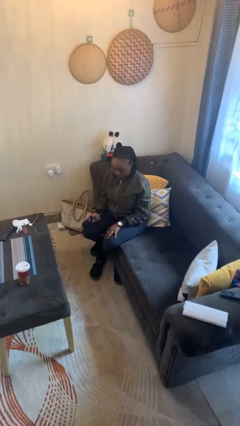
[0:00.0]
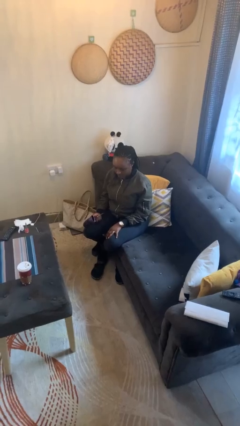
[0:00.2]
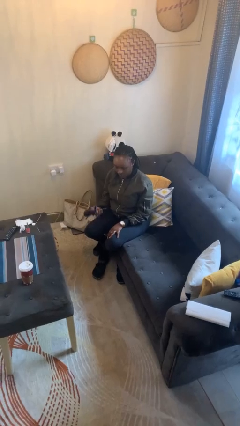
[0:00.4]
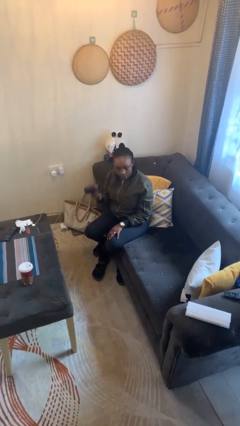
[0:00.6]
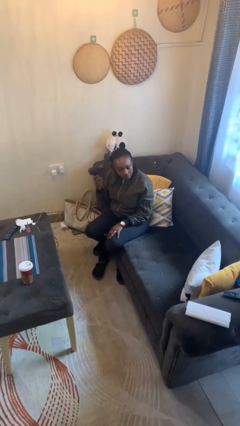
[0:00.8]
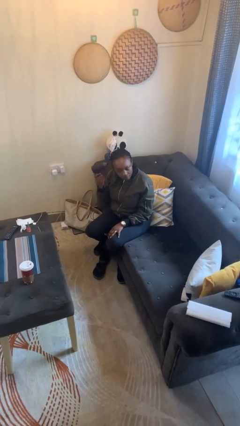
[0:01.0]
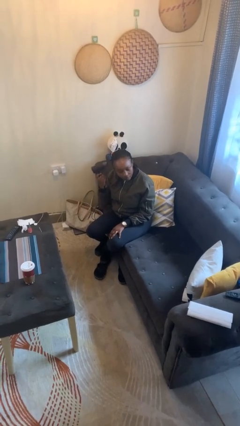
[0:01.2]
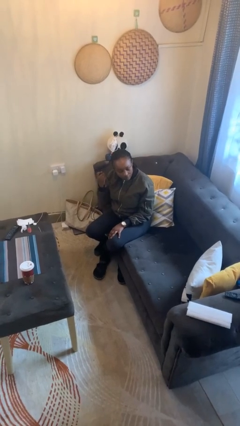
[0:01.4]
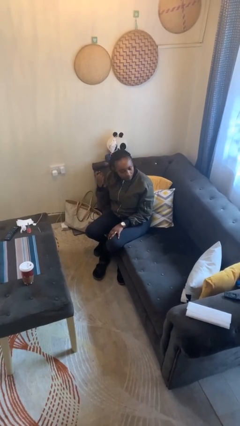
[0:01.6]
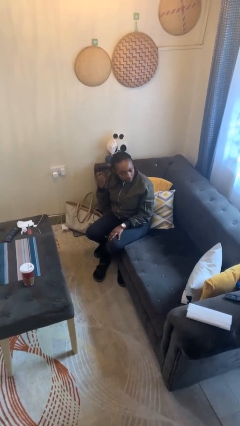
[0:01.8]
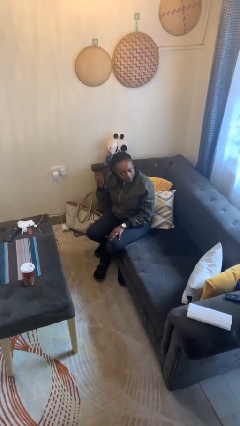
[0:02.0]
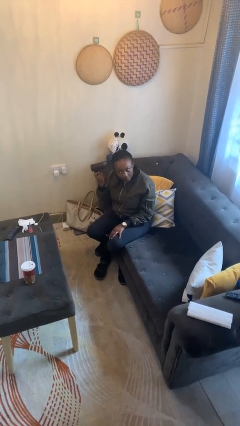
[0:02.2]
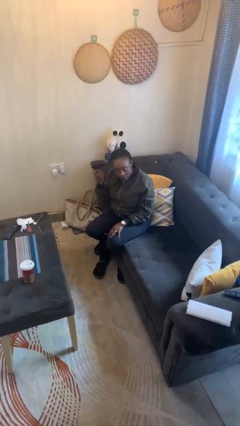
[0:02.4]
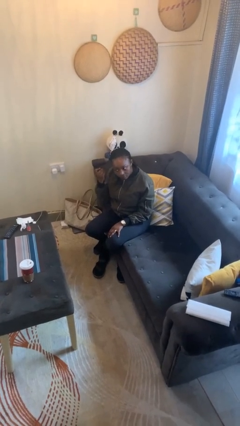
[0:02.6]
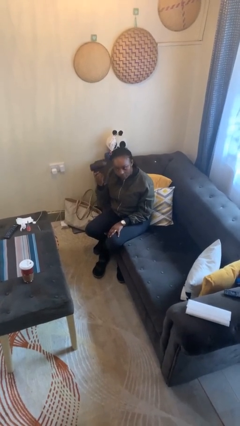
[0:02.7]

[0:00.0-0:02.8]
person dries hair with hairdryer

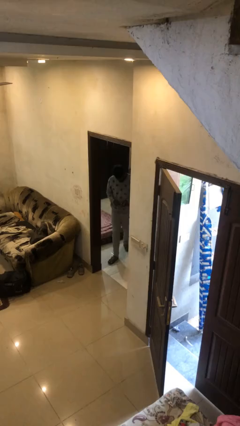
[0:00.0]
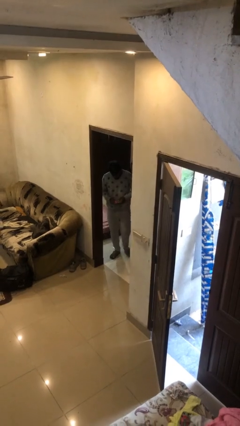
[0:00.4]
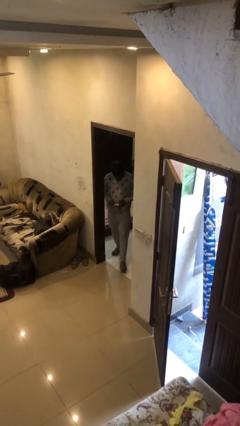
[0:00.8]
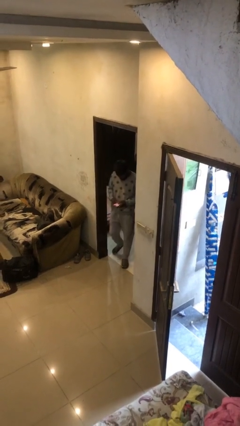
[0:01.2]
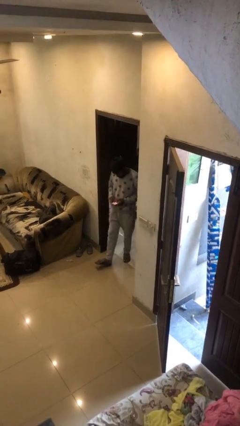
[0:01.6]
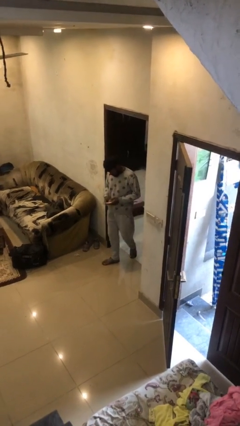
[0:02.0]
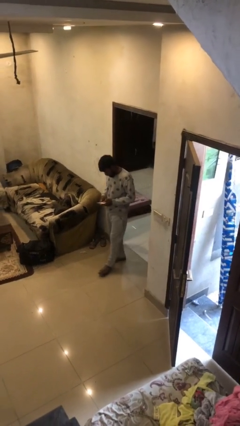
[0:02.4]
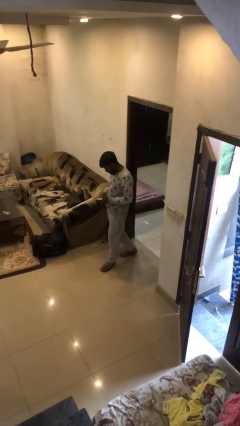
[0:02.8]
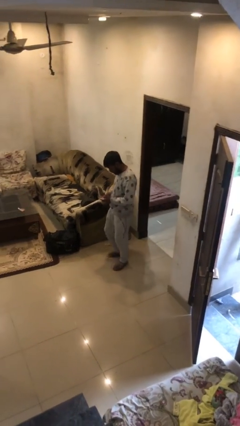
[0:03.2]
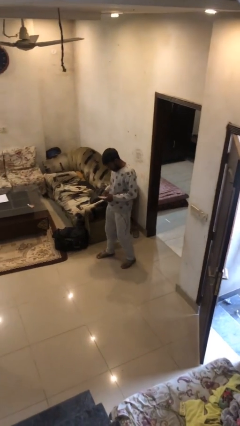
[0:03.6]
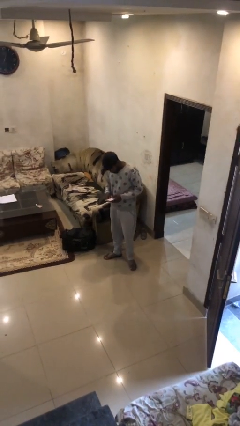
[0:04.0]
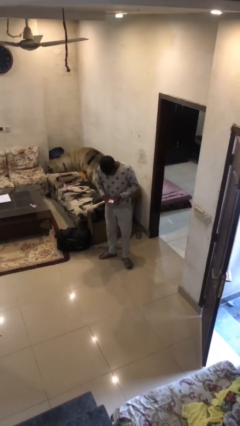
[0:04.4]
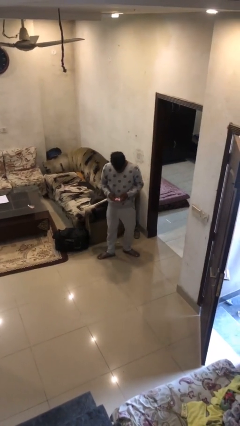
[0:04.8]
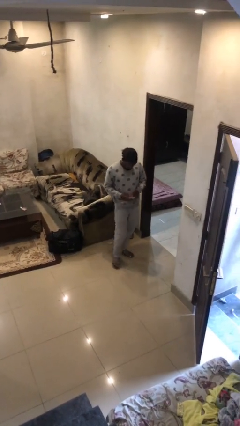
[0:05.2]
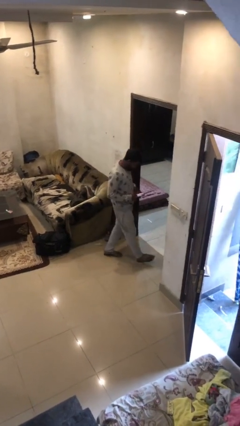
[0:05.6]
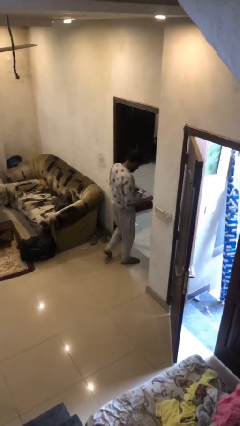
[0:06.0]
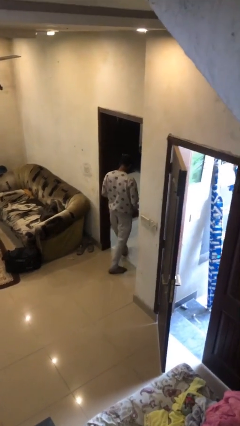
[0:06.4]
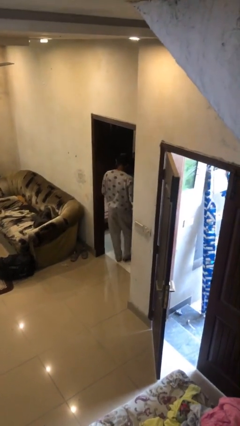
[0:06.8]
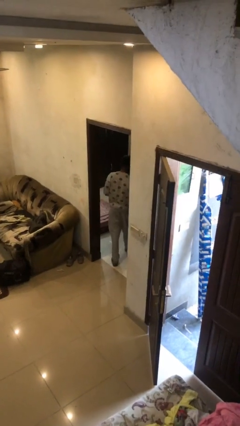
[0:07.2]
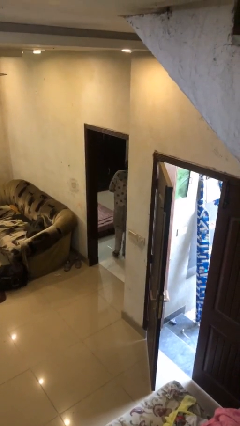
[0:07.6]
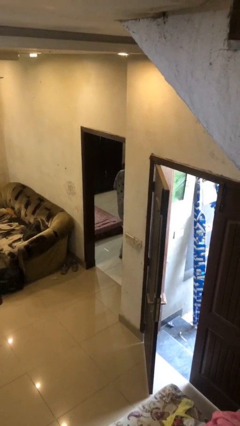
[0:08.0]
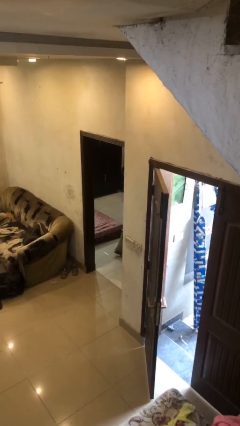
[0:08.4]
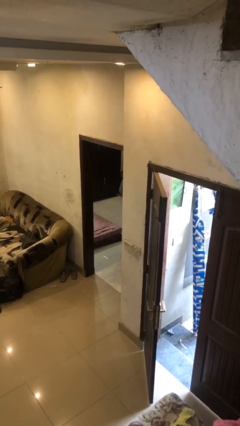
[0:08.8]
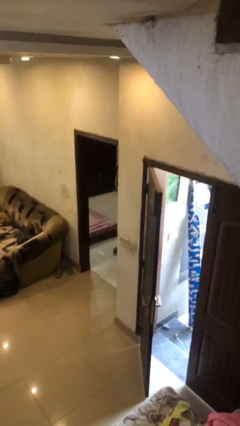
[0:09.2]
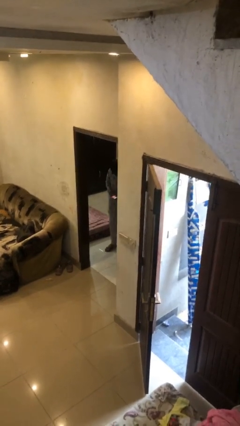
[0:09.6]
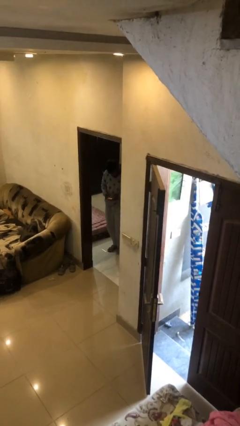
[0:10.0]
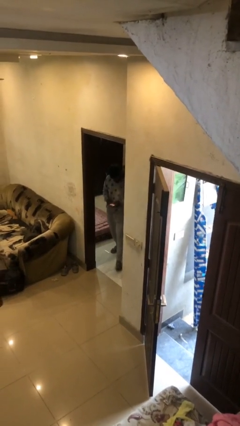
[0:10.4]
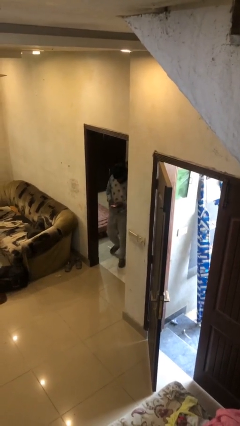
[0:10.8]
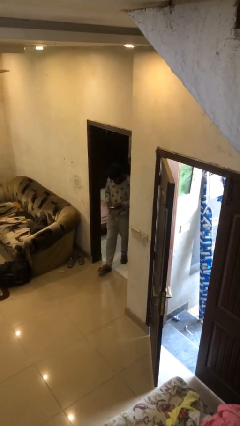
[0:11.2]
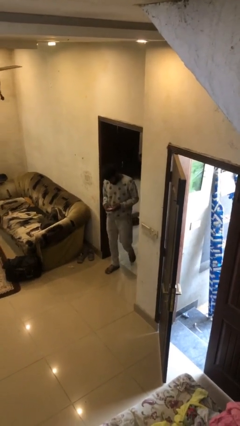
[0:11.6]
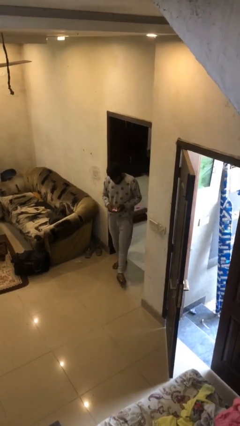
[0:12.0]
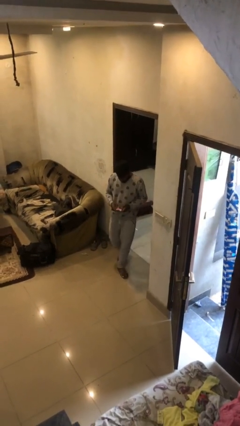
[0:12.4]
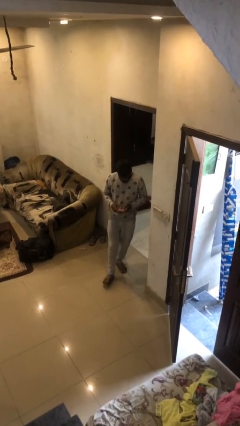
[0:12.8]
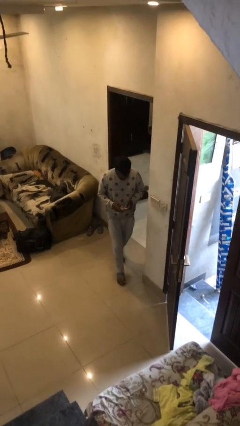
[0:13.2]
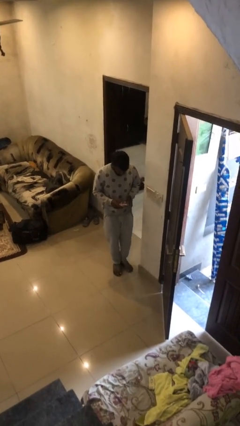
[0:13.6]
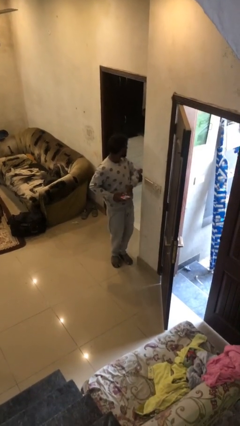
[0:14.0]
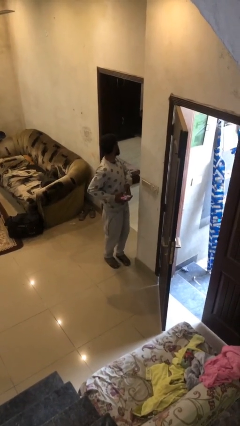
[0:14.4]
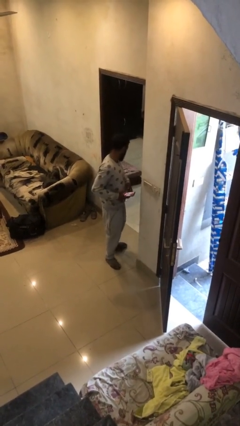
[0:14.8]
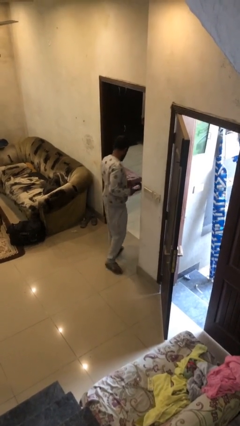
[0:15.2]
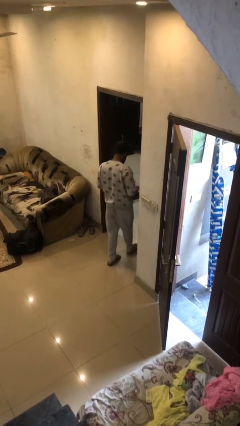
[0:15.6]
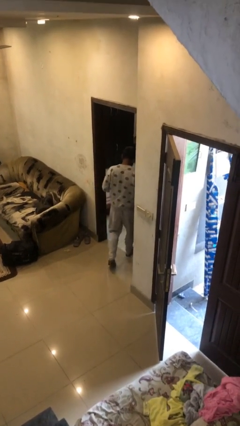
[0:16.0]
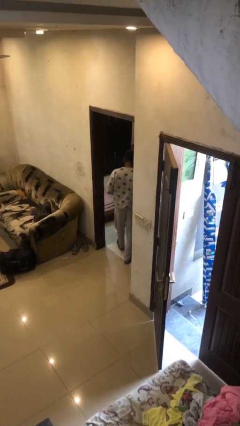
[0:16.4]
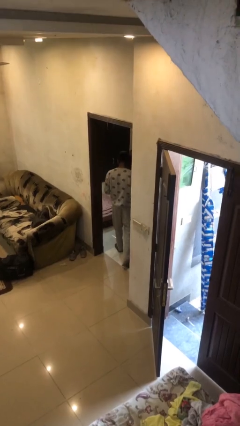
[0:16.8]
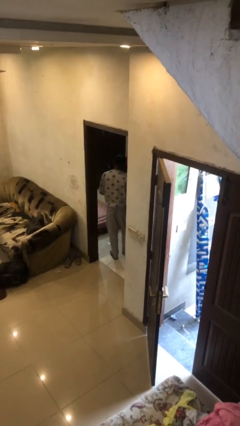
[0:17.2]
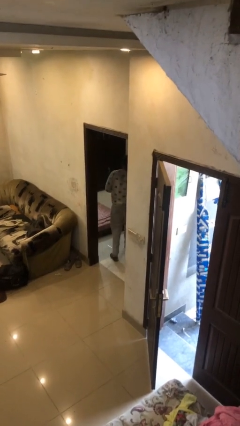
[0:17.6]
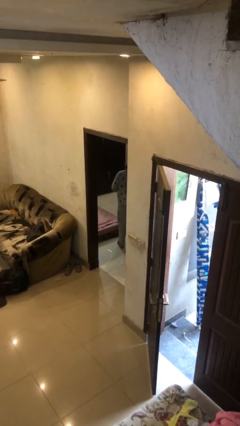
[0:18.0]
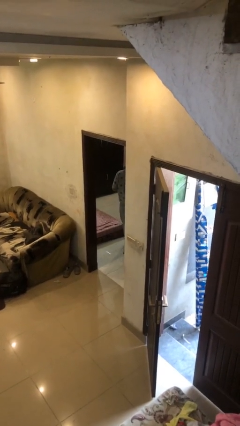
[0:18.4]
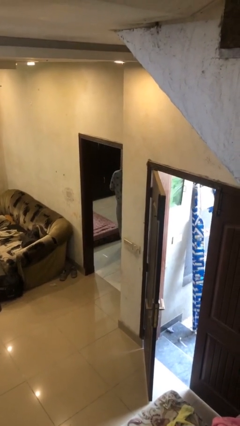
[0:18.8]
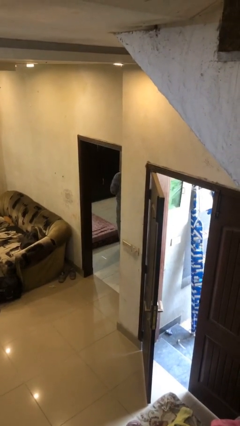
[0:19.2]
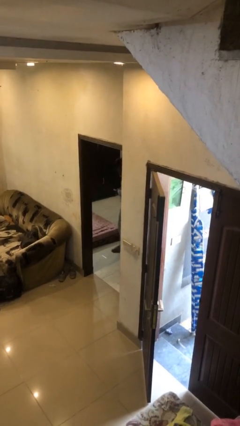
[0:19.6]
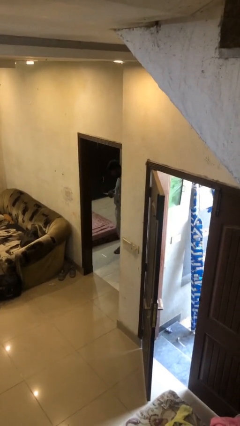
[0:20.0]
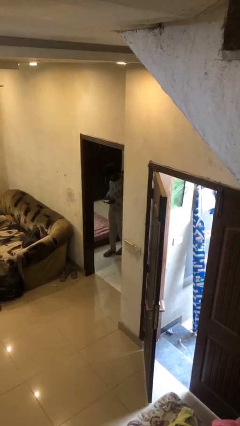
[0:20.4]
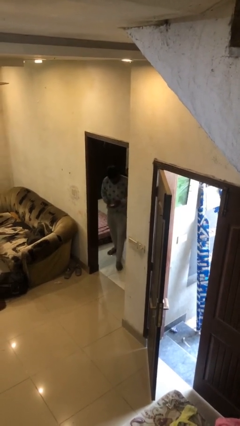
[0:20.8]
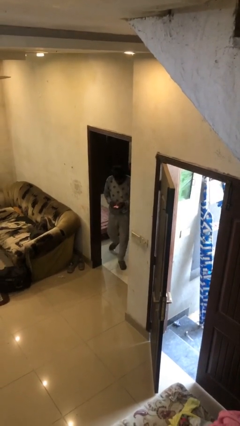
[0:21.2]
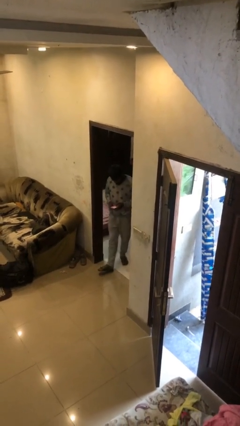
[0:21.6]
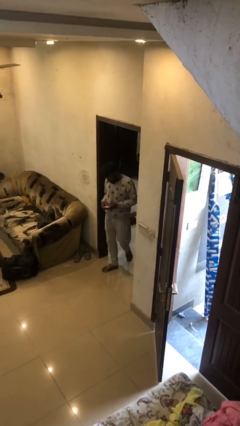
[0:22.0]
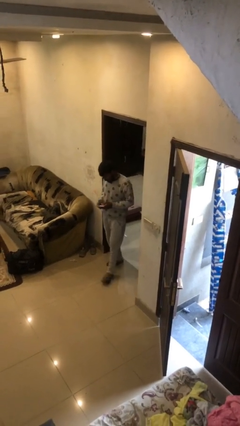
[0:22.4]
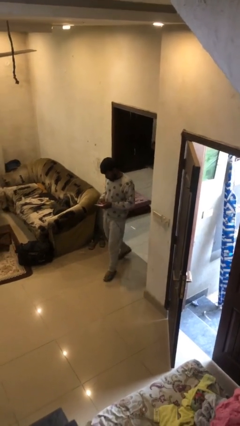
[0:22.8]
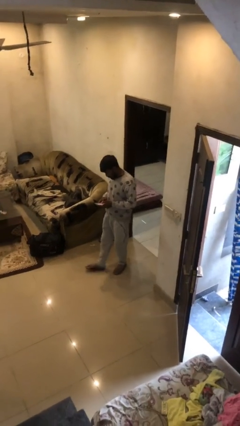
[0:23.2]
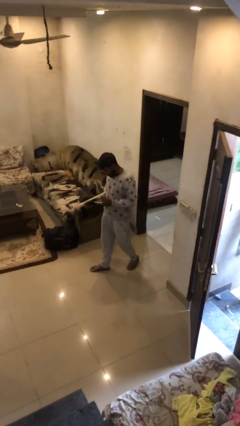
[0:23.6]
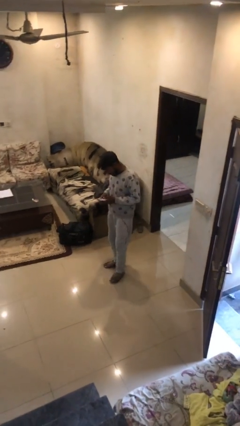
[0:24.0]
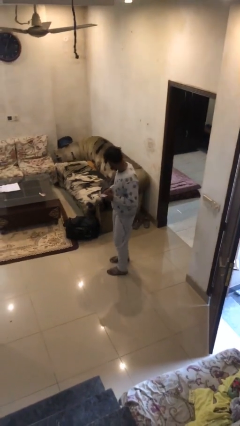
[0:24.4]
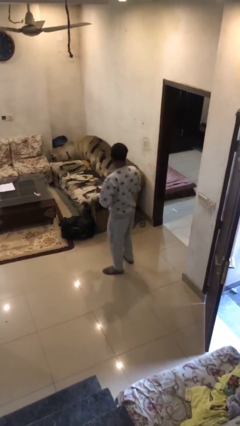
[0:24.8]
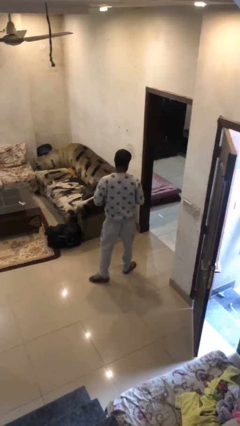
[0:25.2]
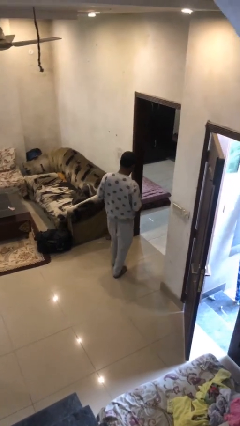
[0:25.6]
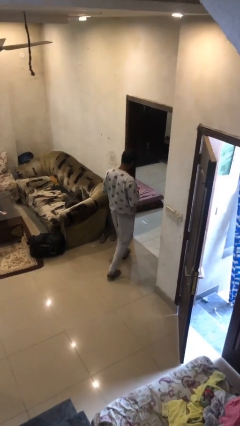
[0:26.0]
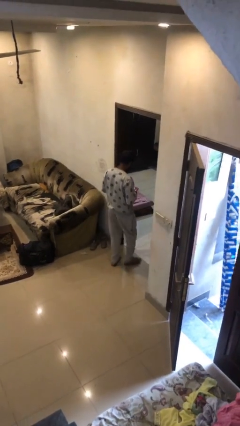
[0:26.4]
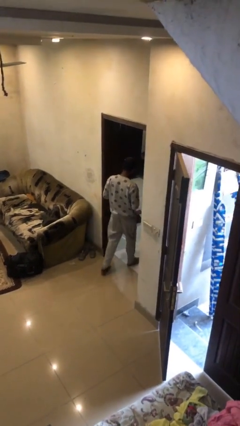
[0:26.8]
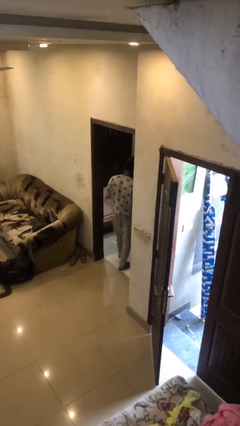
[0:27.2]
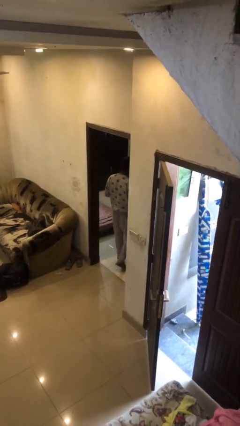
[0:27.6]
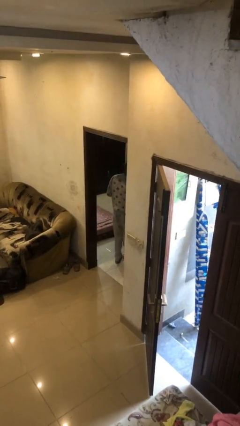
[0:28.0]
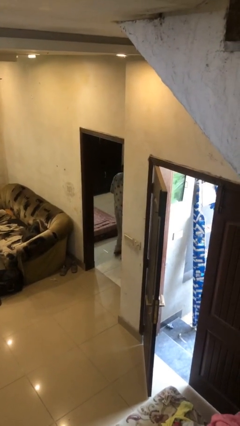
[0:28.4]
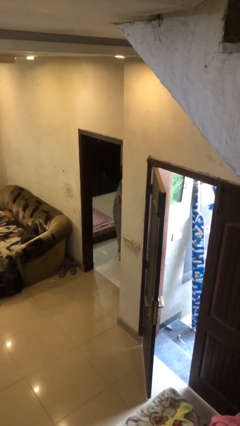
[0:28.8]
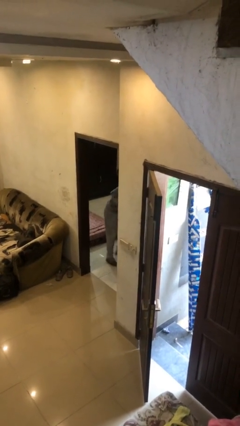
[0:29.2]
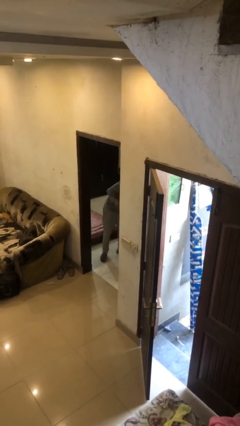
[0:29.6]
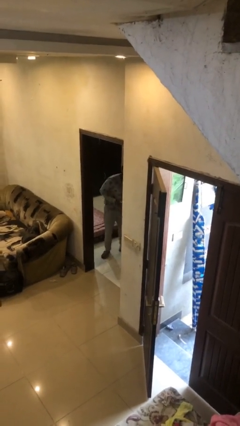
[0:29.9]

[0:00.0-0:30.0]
person texts on phone

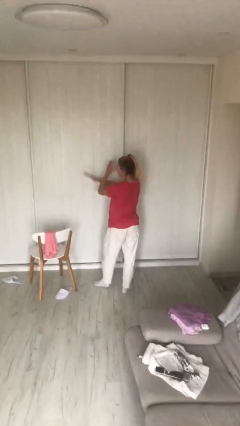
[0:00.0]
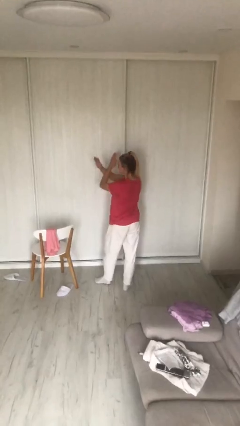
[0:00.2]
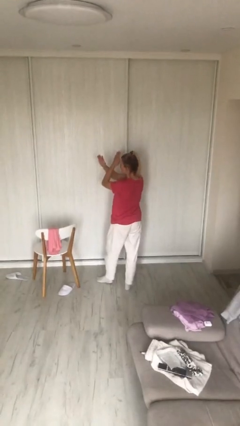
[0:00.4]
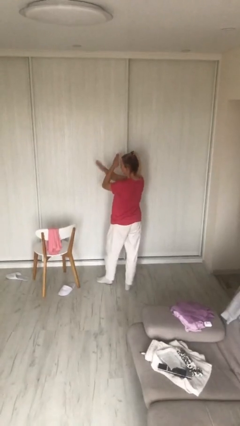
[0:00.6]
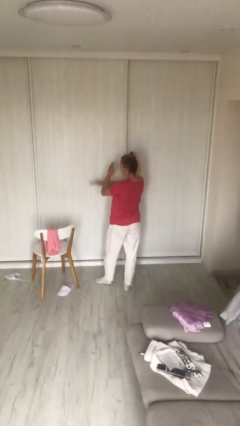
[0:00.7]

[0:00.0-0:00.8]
person gestures arms x
